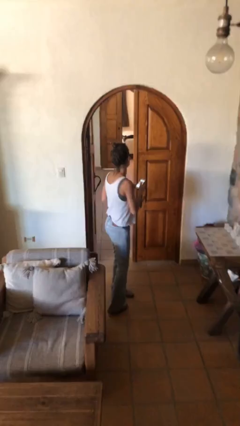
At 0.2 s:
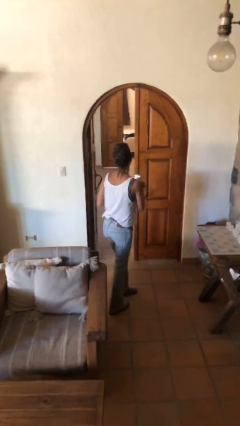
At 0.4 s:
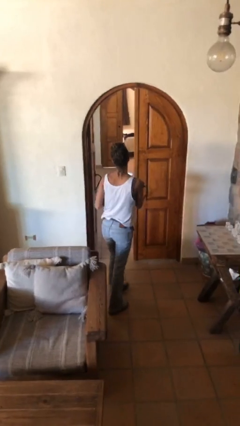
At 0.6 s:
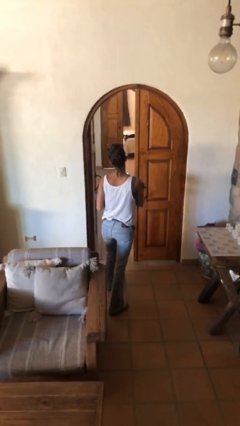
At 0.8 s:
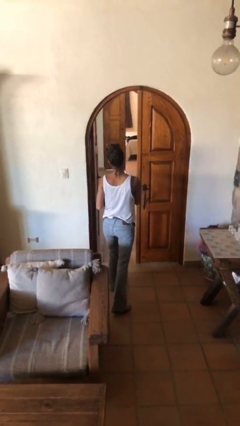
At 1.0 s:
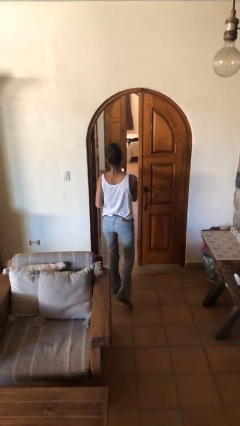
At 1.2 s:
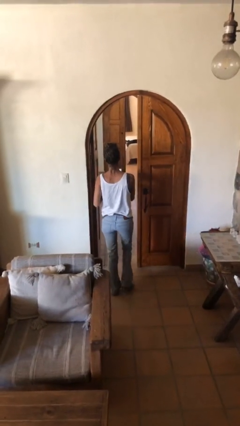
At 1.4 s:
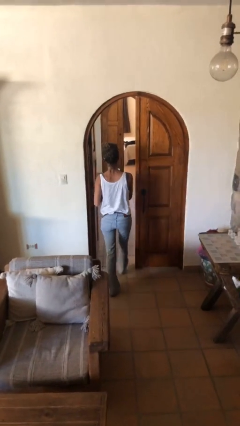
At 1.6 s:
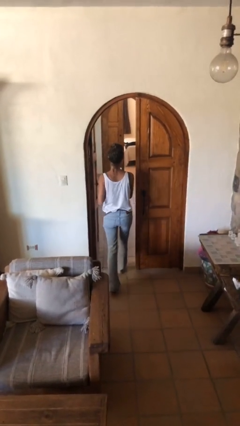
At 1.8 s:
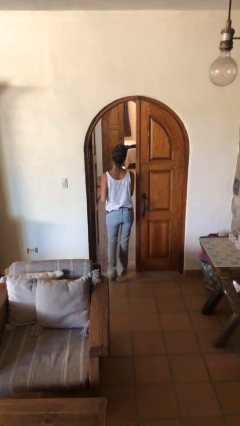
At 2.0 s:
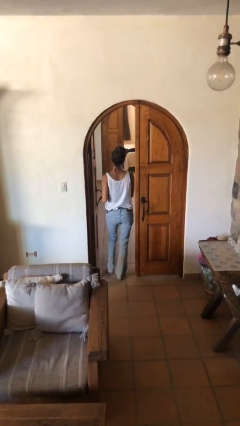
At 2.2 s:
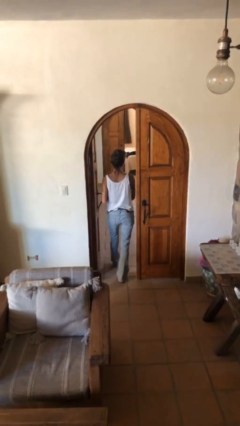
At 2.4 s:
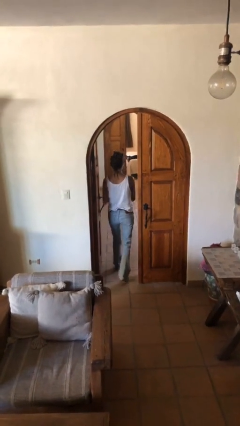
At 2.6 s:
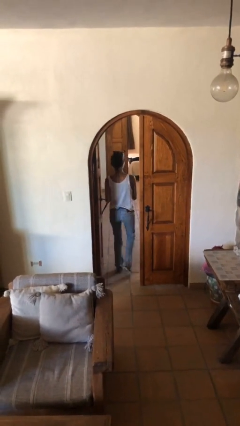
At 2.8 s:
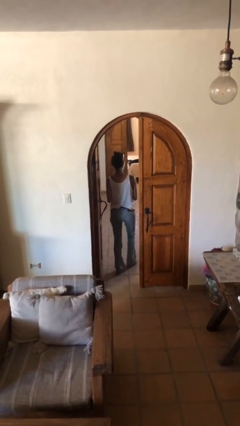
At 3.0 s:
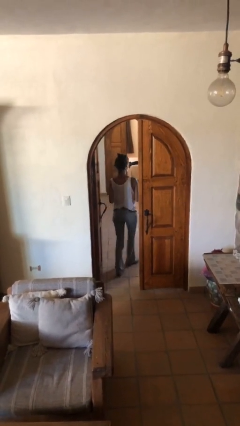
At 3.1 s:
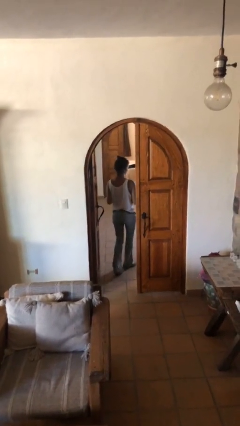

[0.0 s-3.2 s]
person exits scene through structure

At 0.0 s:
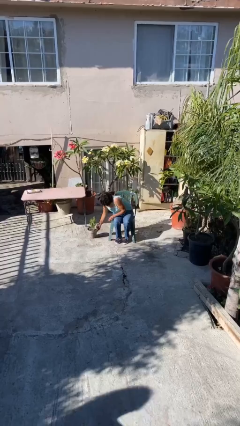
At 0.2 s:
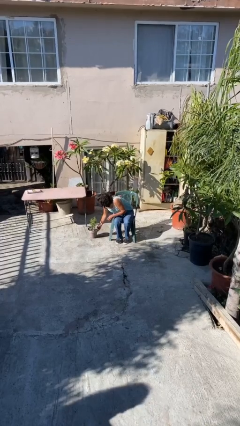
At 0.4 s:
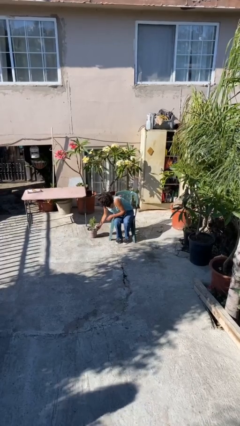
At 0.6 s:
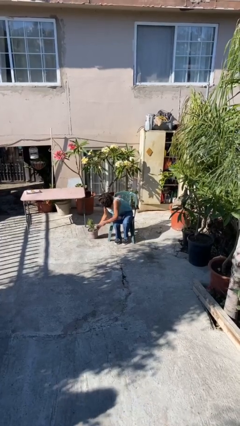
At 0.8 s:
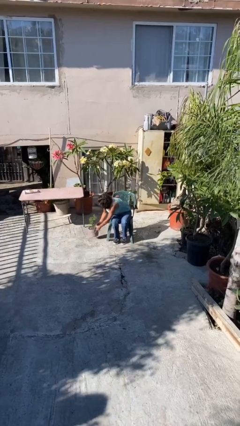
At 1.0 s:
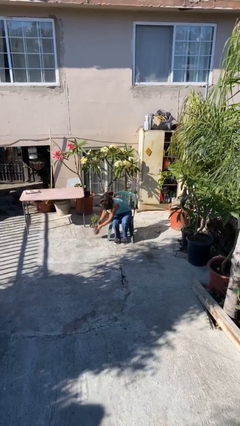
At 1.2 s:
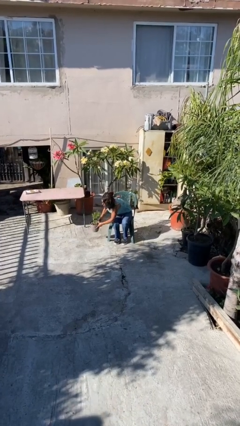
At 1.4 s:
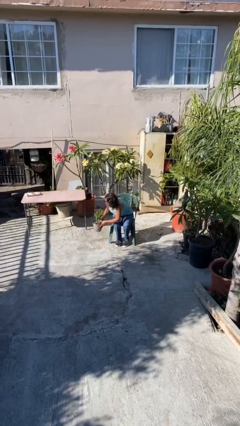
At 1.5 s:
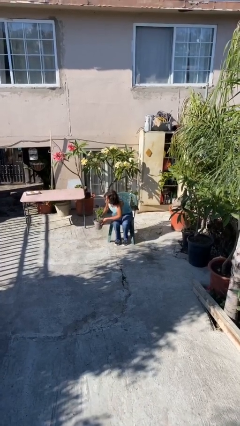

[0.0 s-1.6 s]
person picks up object from floor

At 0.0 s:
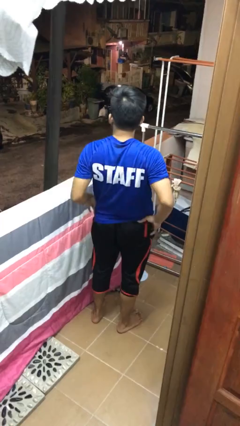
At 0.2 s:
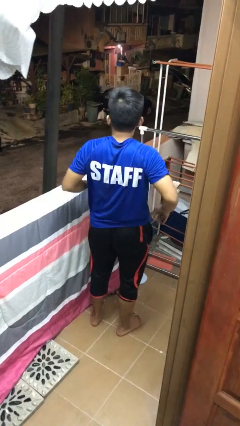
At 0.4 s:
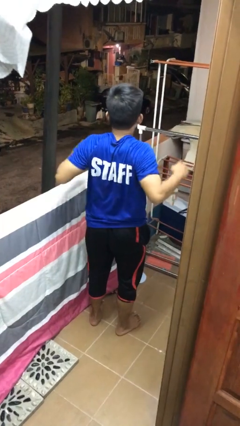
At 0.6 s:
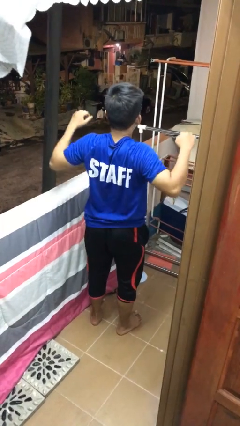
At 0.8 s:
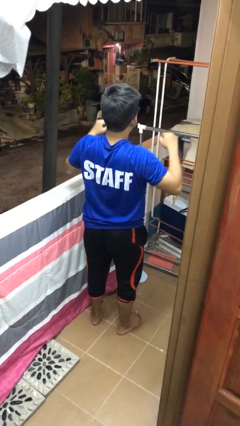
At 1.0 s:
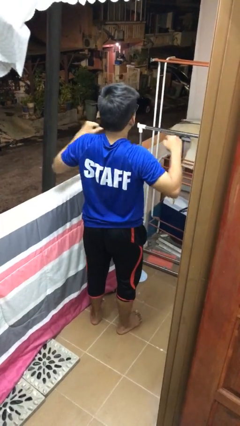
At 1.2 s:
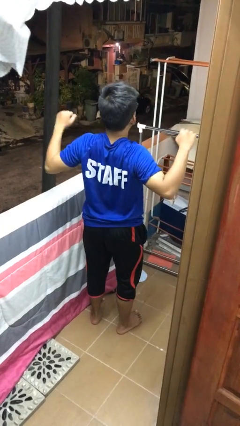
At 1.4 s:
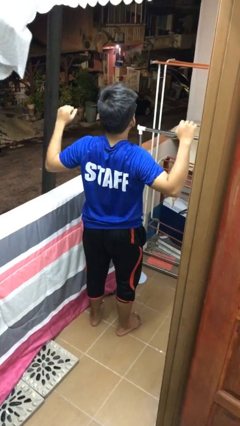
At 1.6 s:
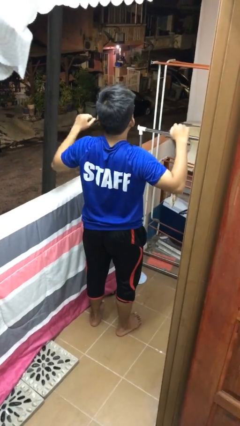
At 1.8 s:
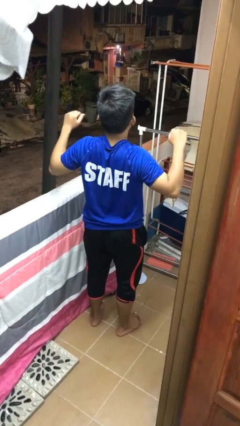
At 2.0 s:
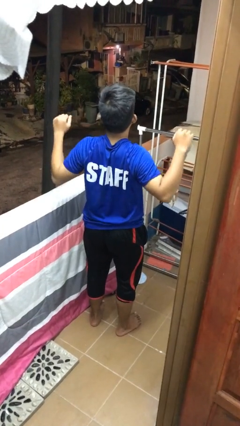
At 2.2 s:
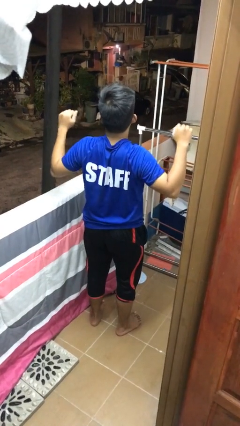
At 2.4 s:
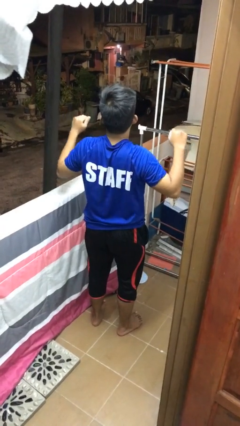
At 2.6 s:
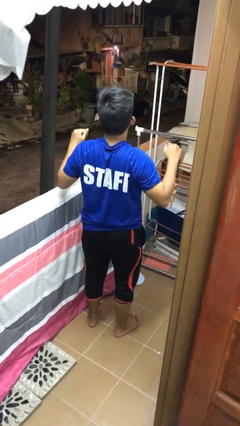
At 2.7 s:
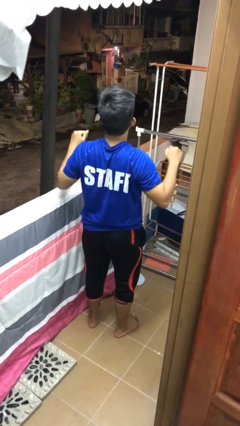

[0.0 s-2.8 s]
person stretches arms to side

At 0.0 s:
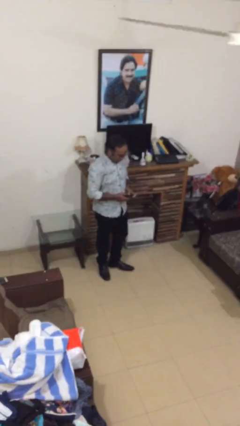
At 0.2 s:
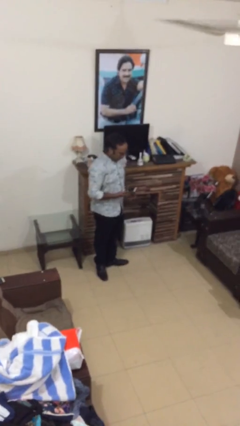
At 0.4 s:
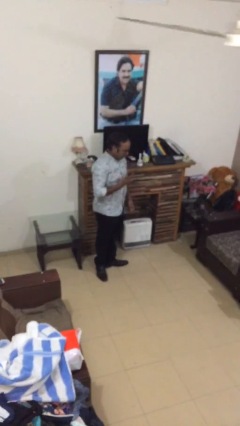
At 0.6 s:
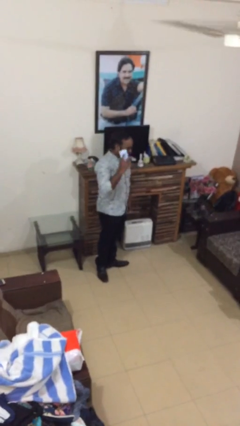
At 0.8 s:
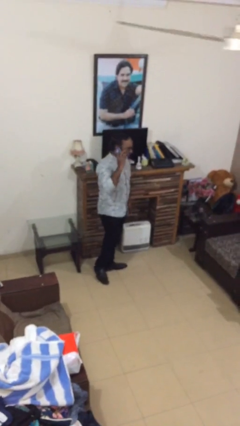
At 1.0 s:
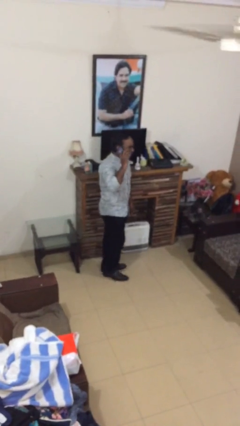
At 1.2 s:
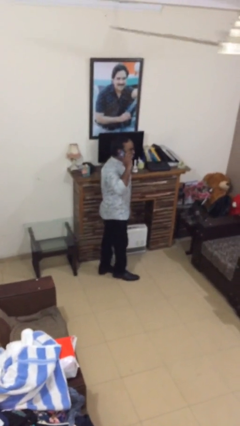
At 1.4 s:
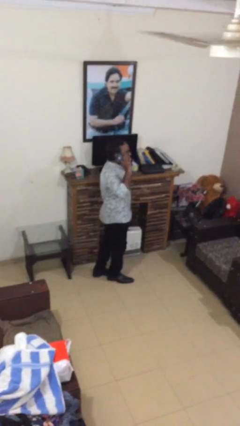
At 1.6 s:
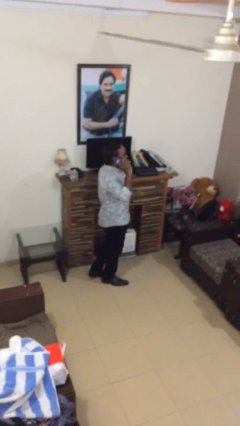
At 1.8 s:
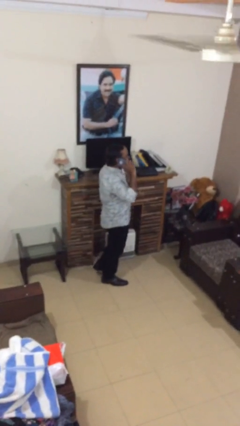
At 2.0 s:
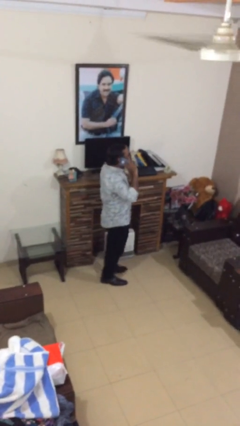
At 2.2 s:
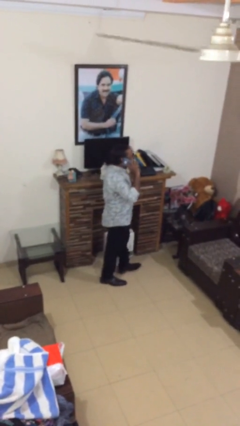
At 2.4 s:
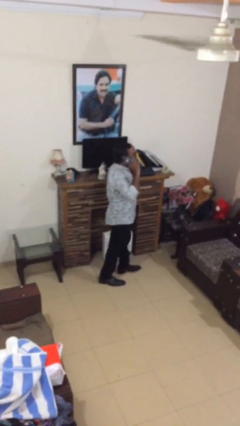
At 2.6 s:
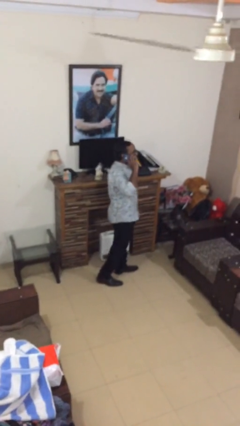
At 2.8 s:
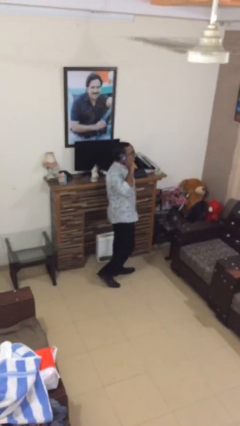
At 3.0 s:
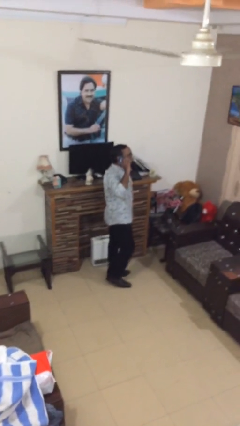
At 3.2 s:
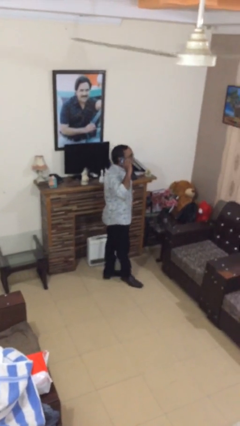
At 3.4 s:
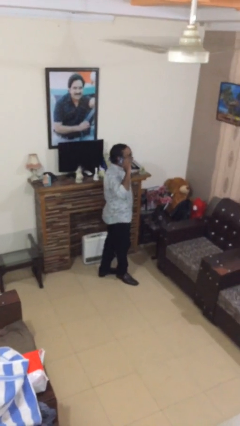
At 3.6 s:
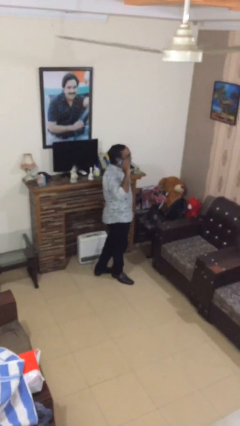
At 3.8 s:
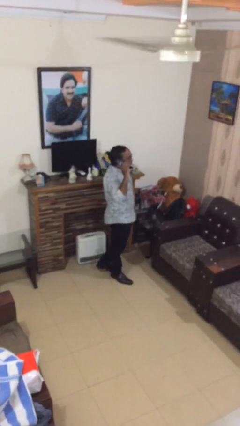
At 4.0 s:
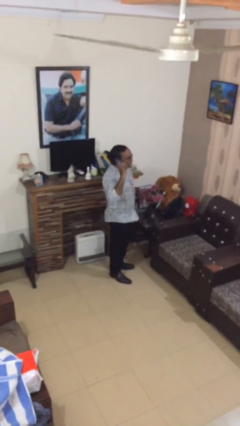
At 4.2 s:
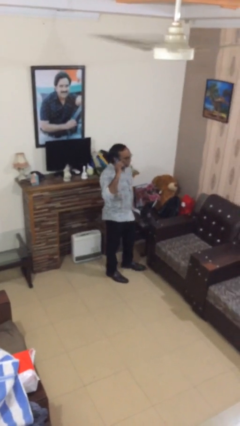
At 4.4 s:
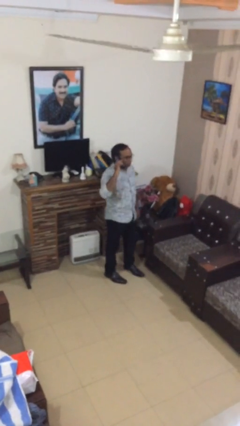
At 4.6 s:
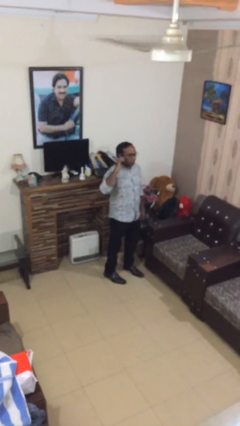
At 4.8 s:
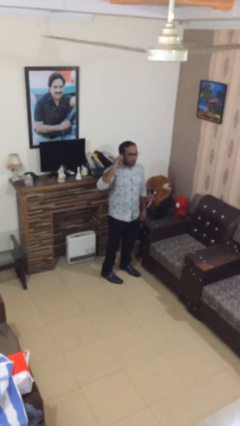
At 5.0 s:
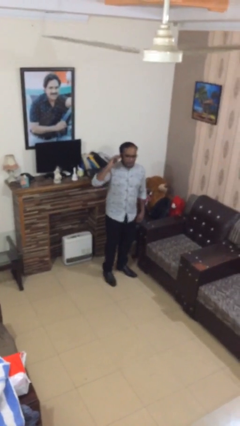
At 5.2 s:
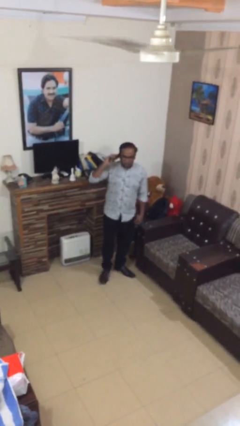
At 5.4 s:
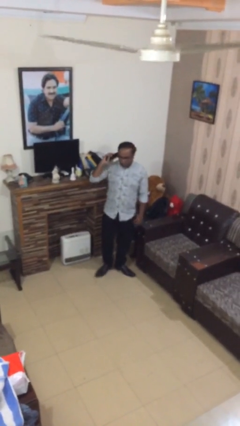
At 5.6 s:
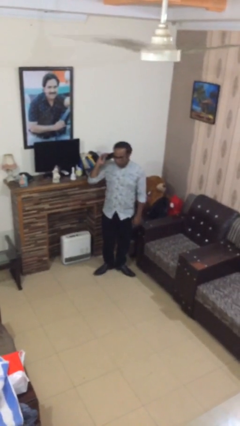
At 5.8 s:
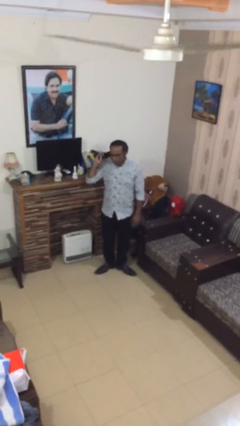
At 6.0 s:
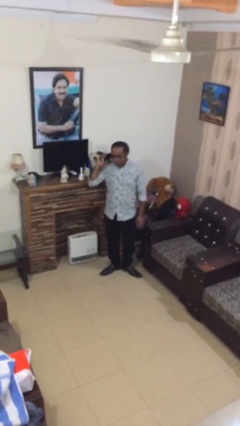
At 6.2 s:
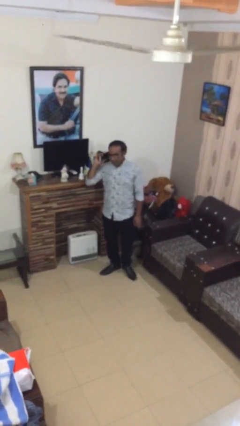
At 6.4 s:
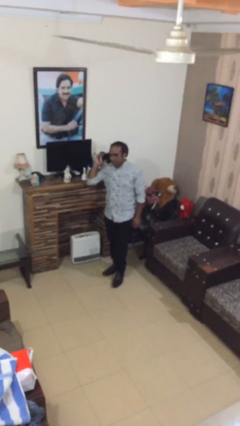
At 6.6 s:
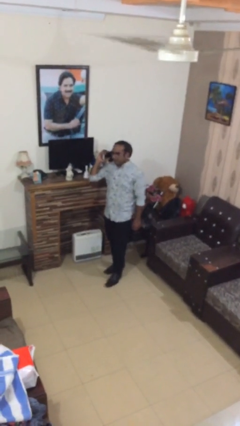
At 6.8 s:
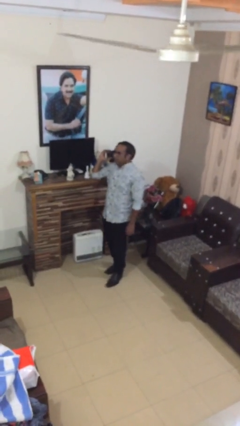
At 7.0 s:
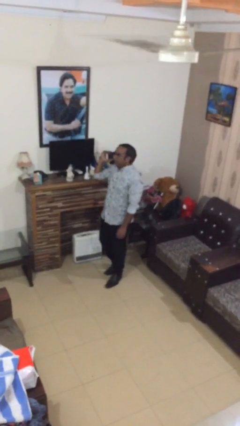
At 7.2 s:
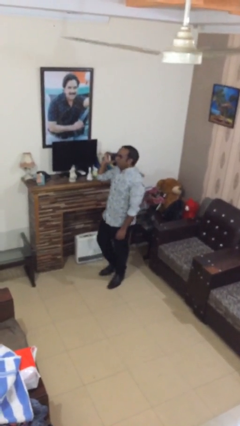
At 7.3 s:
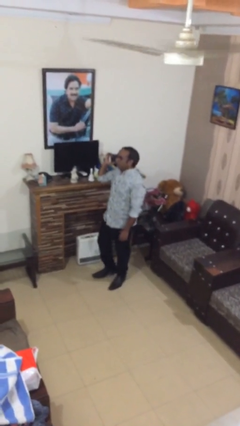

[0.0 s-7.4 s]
person talks on phone

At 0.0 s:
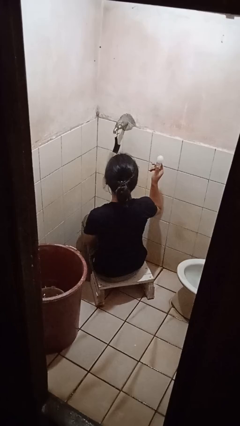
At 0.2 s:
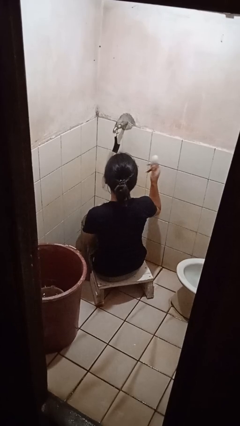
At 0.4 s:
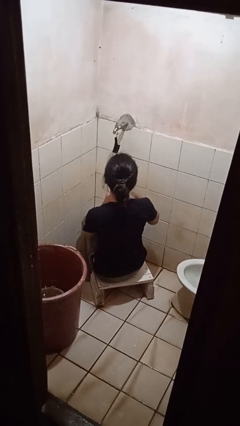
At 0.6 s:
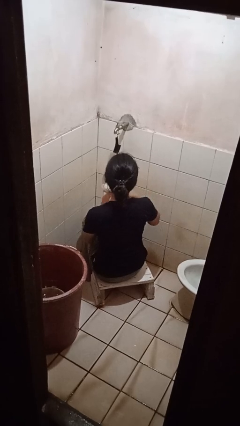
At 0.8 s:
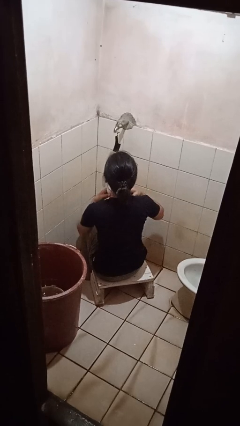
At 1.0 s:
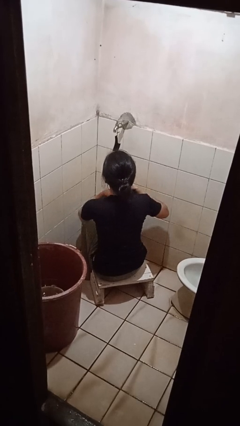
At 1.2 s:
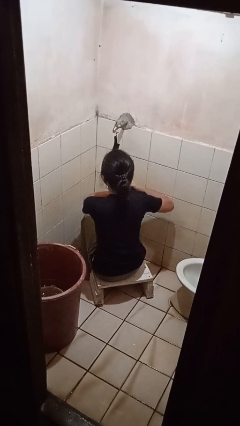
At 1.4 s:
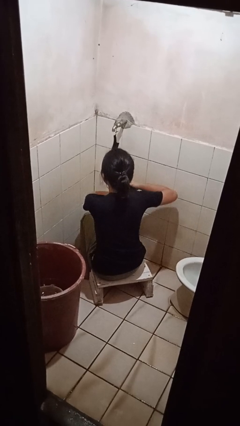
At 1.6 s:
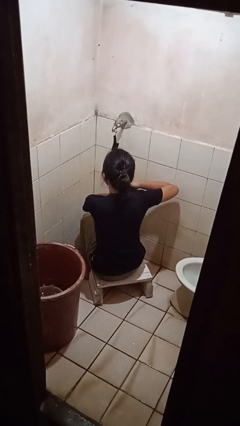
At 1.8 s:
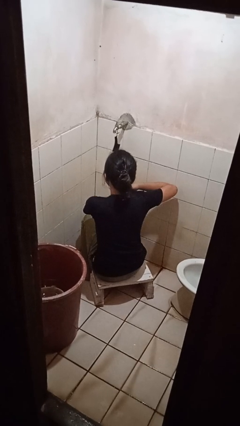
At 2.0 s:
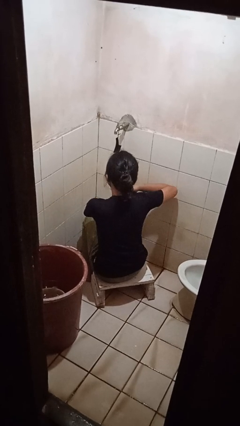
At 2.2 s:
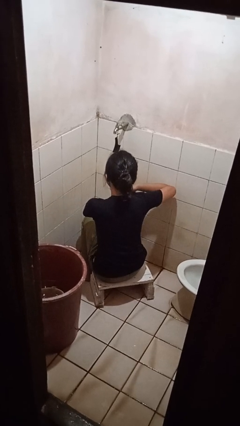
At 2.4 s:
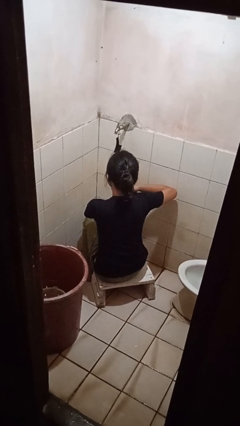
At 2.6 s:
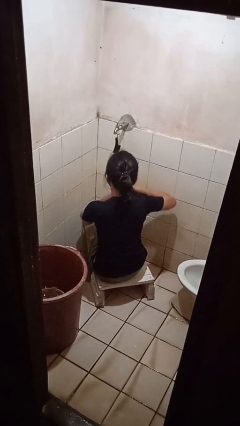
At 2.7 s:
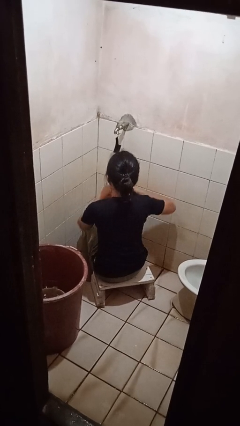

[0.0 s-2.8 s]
person applies deodorant
